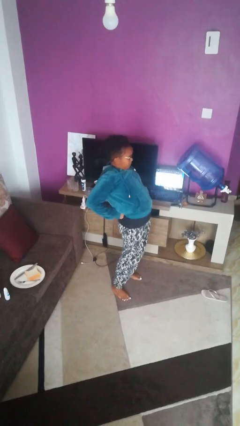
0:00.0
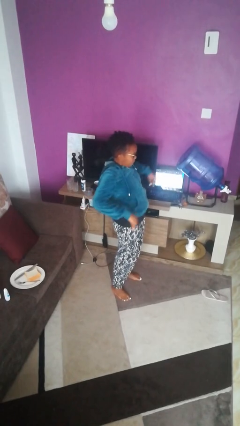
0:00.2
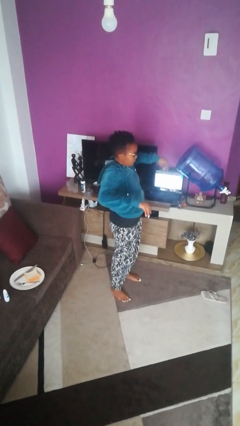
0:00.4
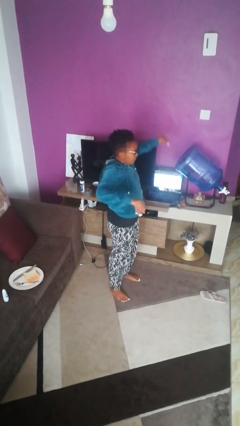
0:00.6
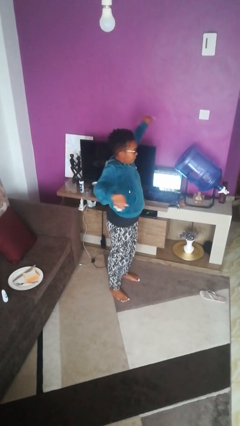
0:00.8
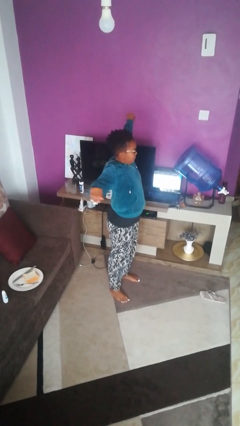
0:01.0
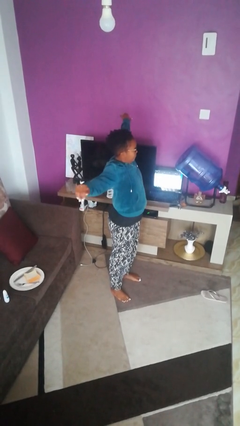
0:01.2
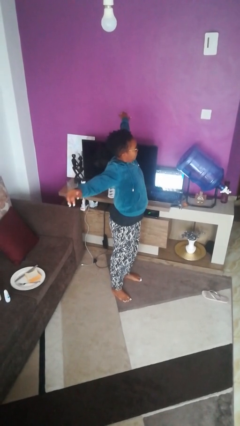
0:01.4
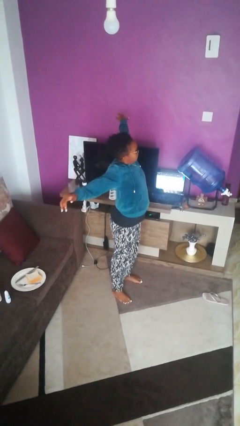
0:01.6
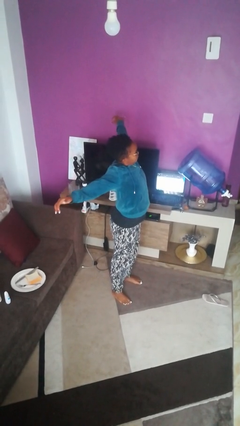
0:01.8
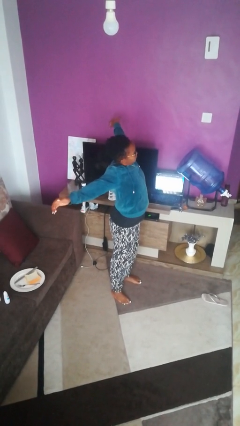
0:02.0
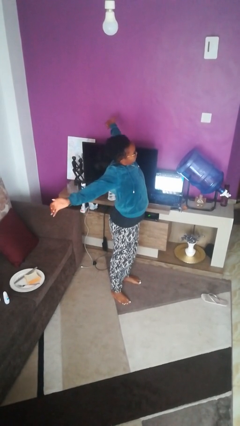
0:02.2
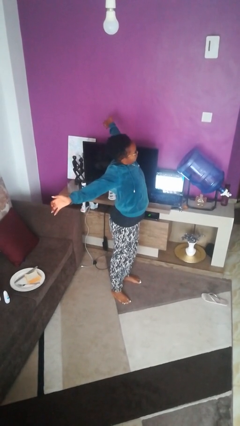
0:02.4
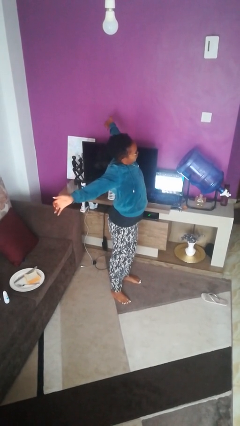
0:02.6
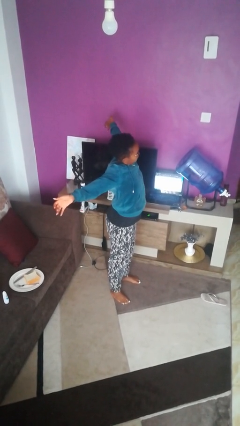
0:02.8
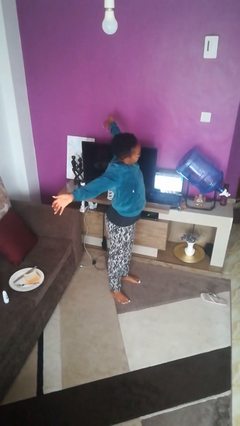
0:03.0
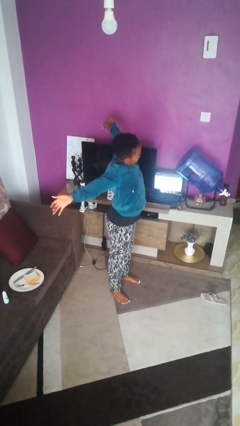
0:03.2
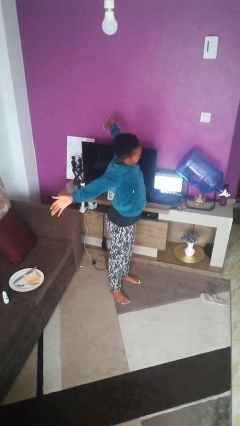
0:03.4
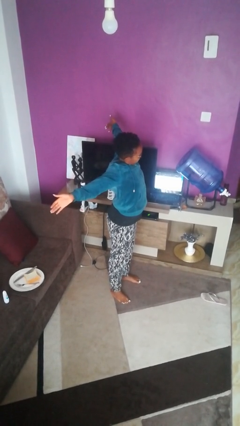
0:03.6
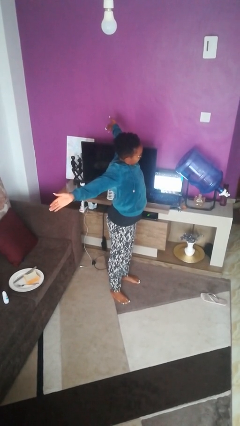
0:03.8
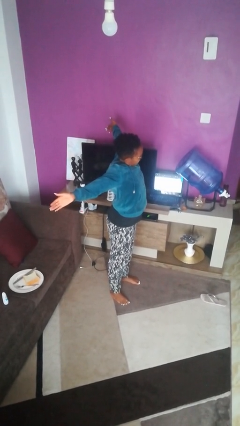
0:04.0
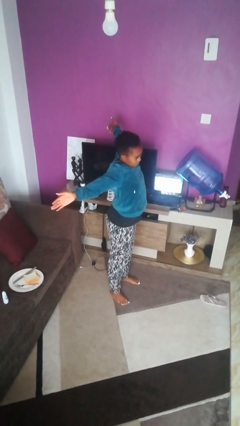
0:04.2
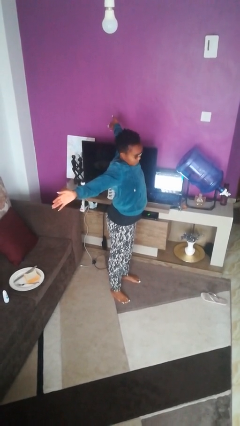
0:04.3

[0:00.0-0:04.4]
person stretches arms to side

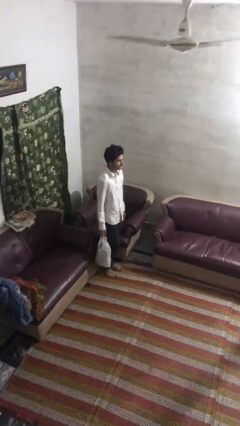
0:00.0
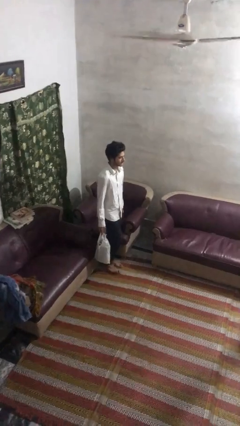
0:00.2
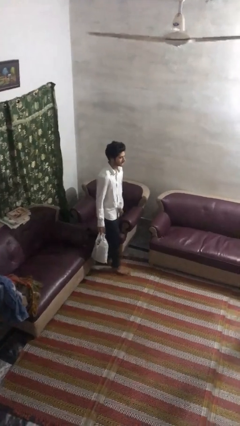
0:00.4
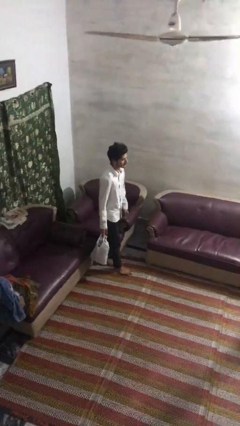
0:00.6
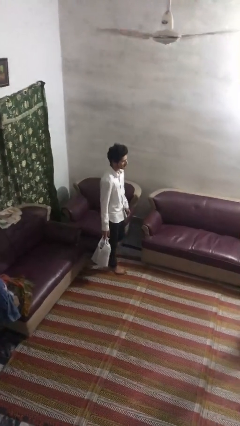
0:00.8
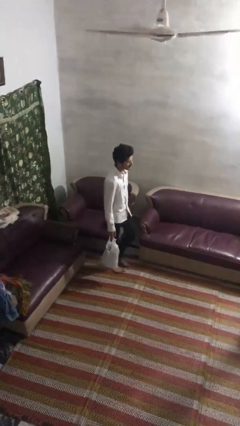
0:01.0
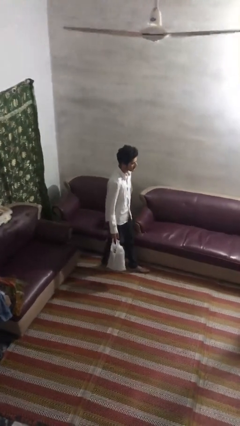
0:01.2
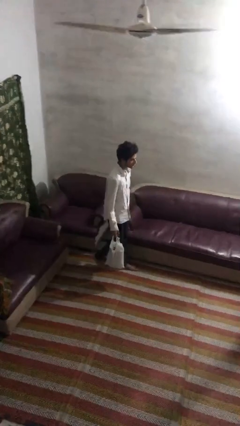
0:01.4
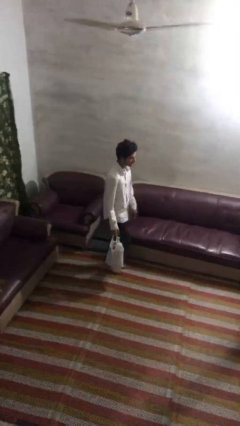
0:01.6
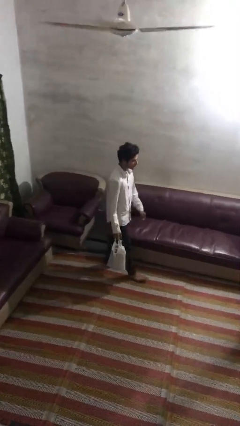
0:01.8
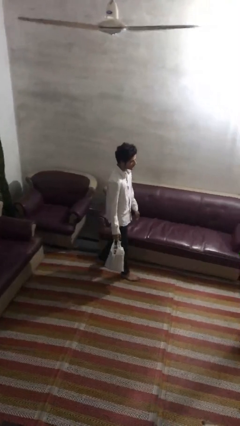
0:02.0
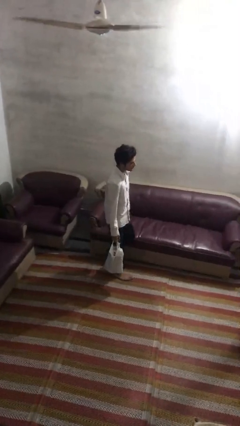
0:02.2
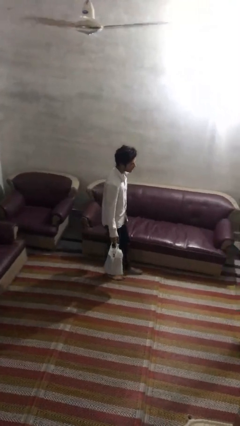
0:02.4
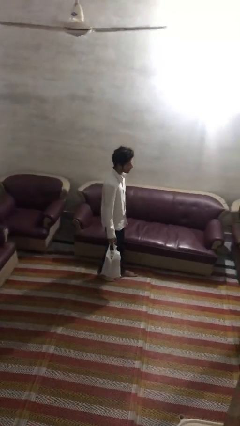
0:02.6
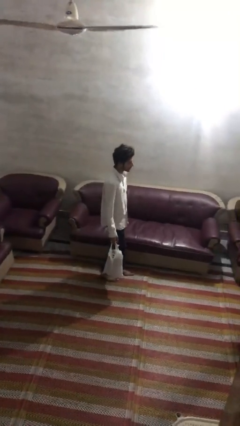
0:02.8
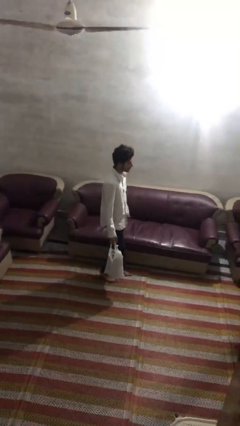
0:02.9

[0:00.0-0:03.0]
person carries groceries

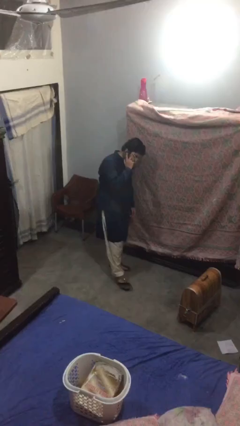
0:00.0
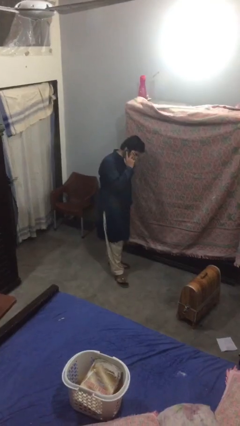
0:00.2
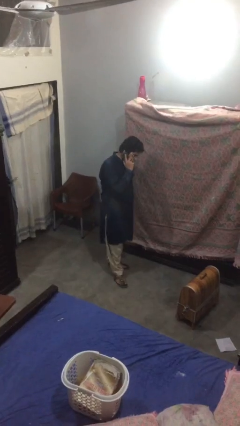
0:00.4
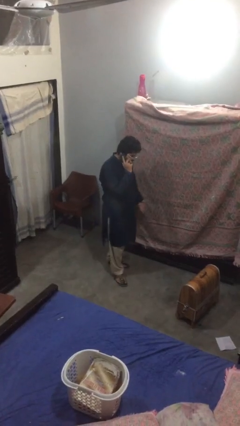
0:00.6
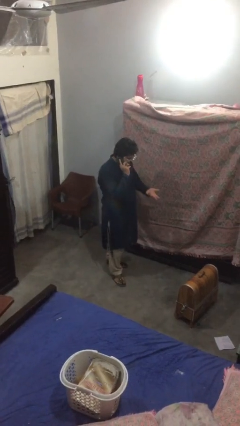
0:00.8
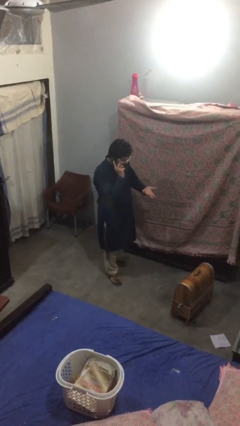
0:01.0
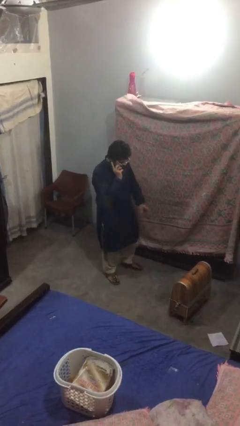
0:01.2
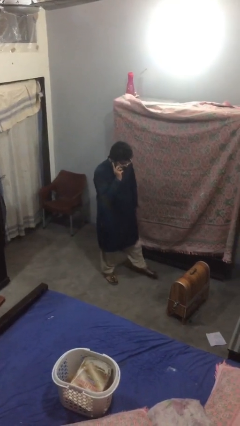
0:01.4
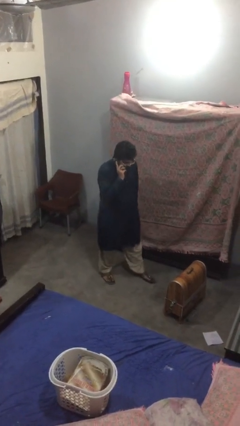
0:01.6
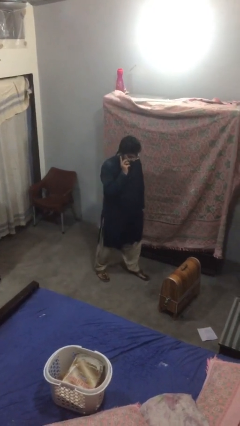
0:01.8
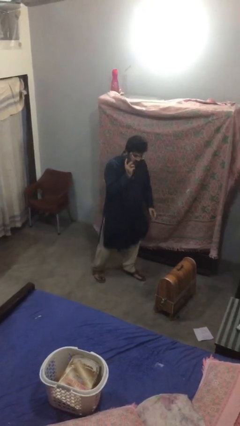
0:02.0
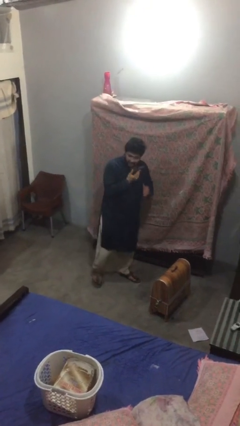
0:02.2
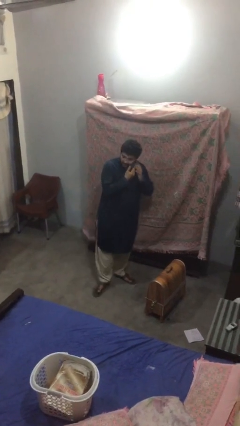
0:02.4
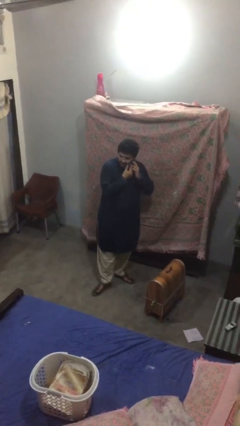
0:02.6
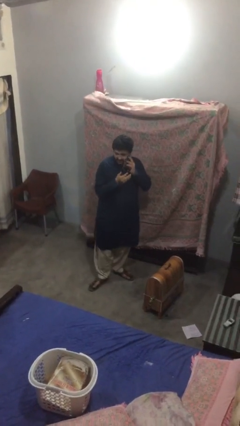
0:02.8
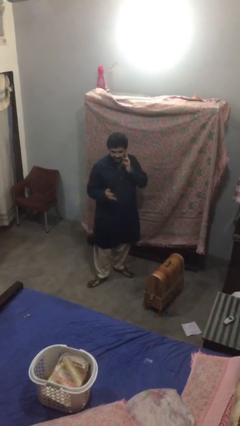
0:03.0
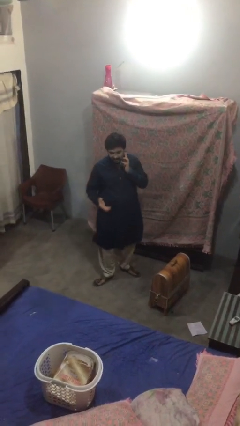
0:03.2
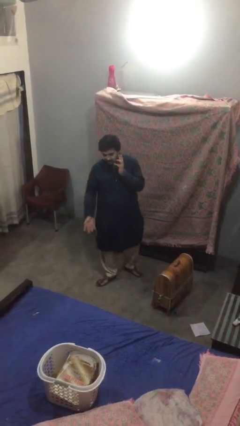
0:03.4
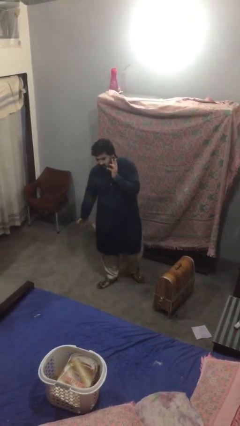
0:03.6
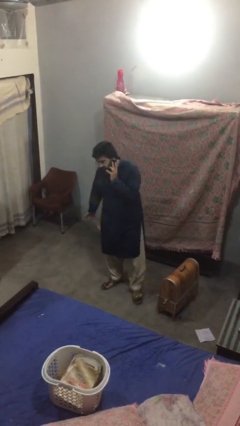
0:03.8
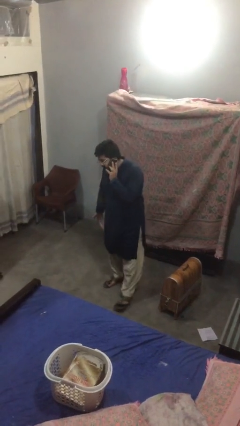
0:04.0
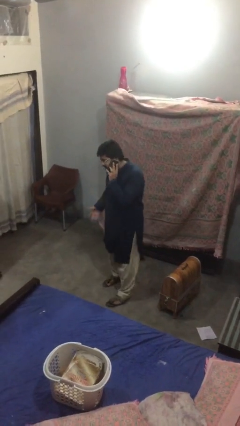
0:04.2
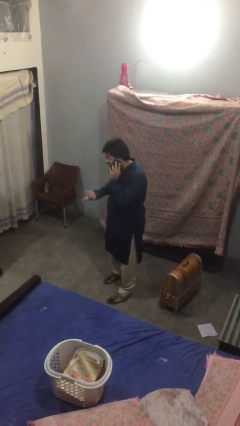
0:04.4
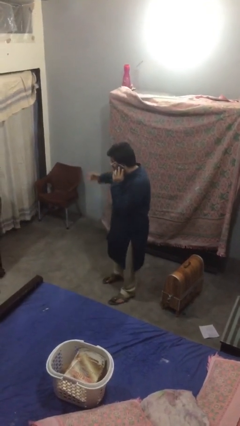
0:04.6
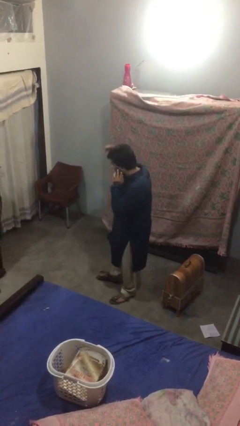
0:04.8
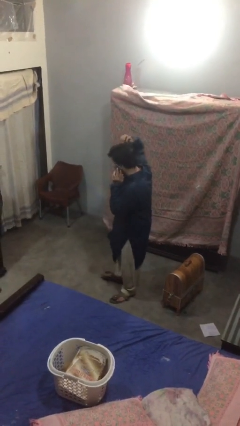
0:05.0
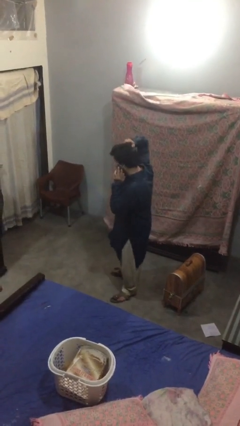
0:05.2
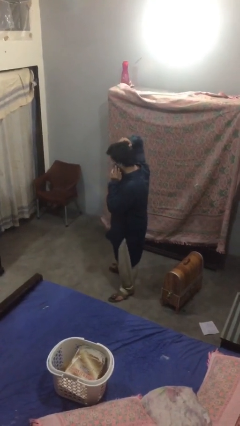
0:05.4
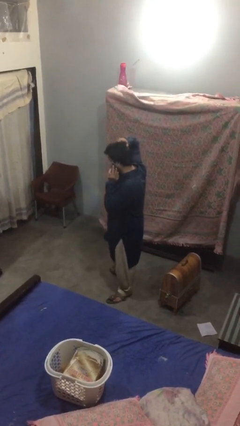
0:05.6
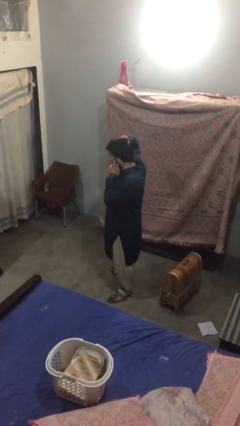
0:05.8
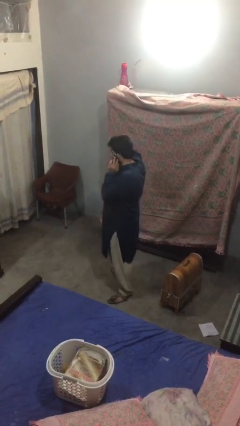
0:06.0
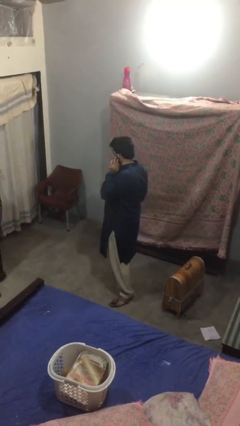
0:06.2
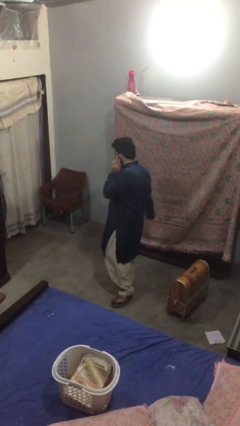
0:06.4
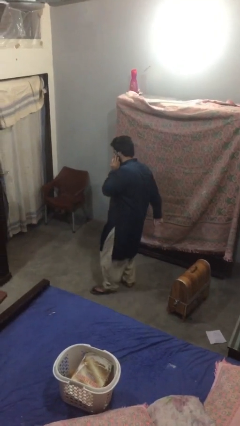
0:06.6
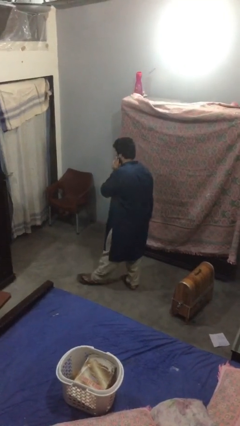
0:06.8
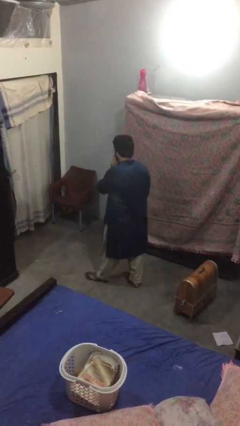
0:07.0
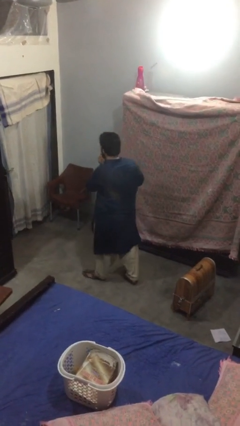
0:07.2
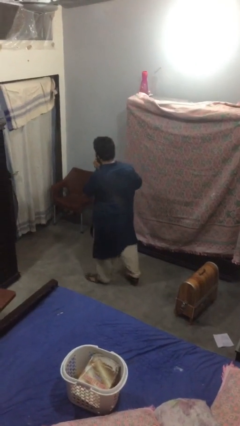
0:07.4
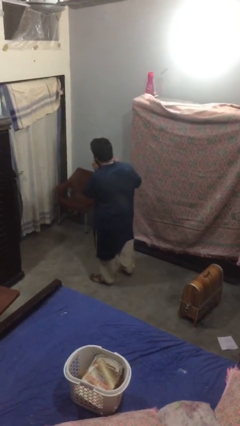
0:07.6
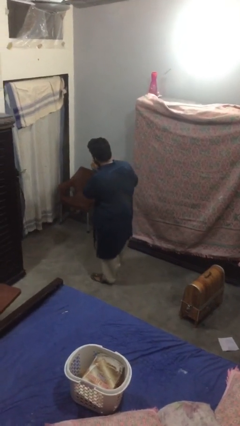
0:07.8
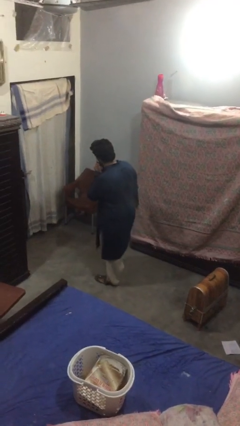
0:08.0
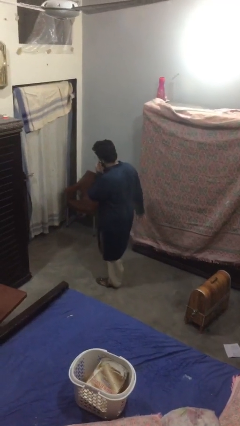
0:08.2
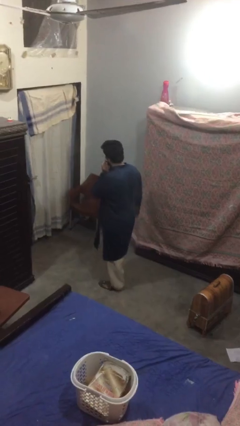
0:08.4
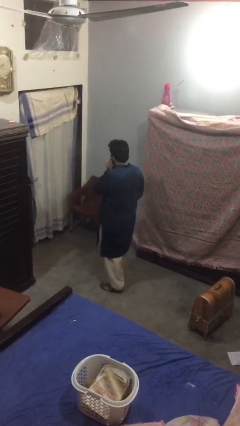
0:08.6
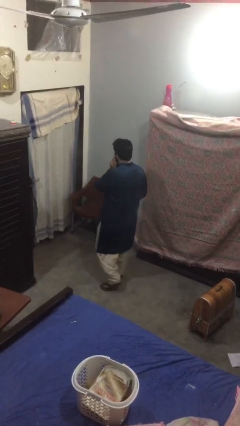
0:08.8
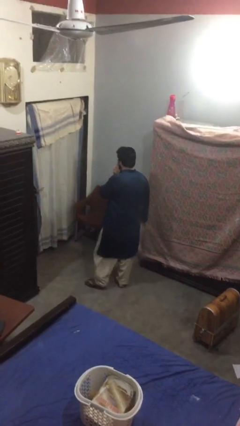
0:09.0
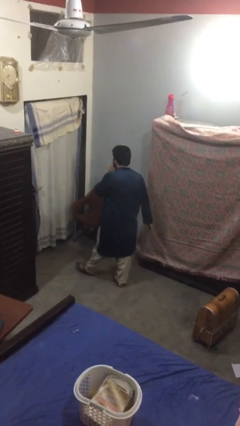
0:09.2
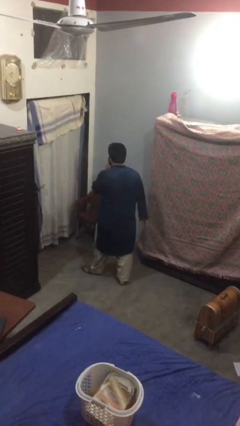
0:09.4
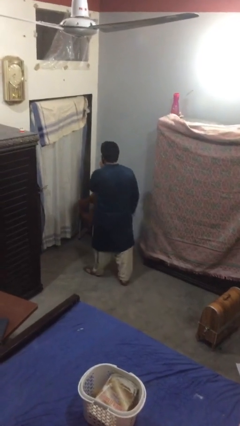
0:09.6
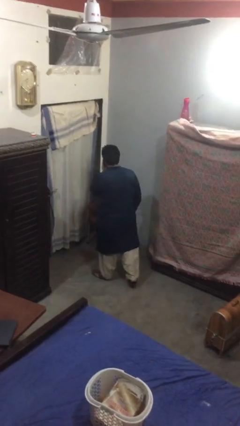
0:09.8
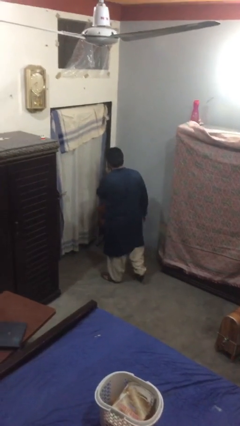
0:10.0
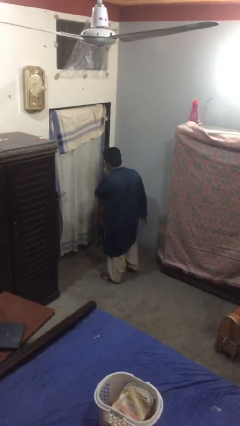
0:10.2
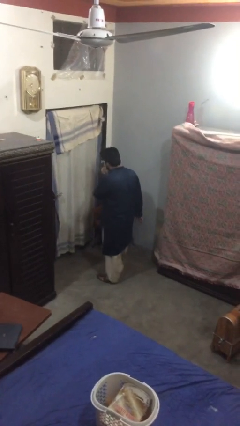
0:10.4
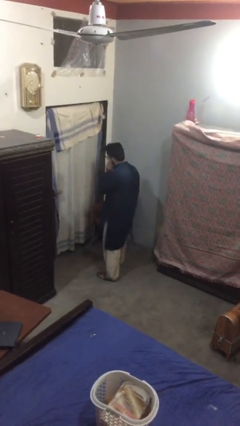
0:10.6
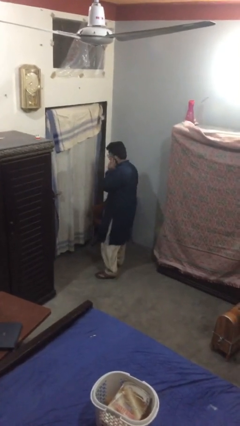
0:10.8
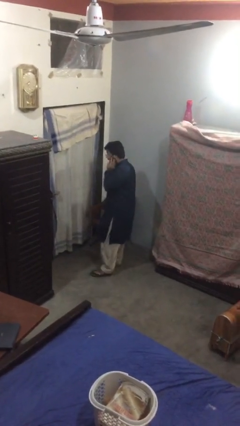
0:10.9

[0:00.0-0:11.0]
person talks on phone
